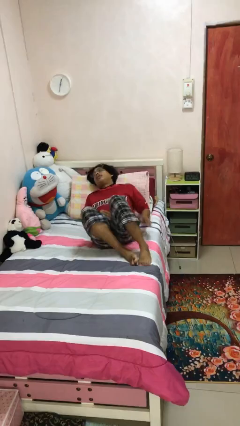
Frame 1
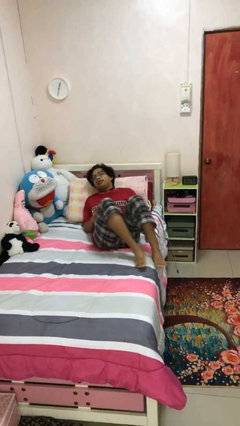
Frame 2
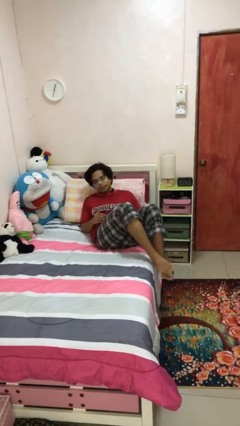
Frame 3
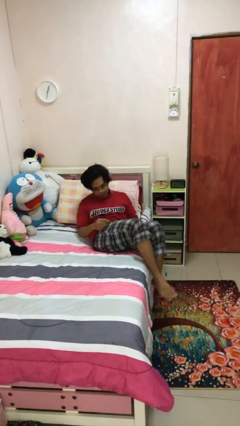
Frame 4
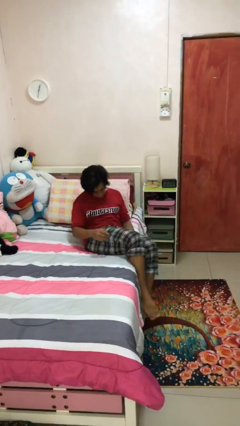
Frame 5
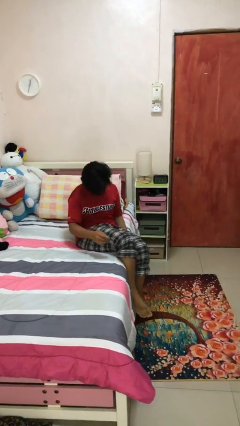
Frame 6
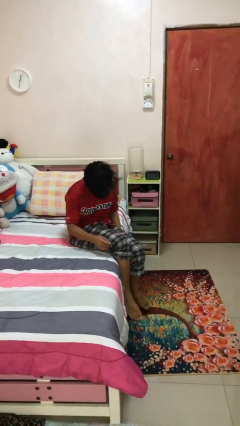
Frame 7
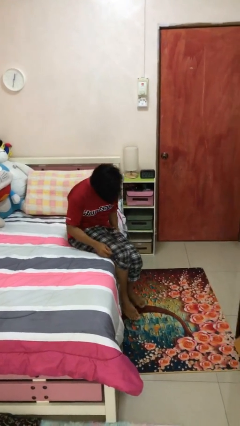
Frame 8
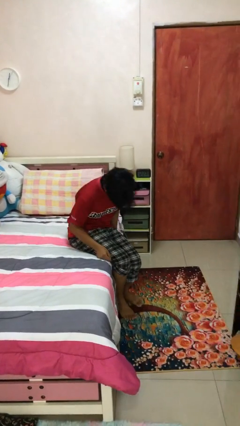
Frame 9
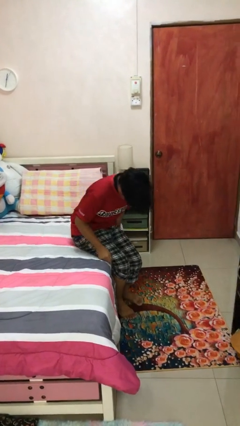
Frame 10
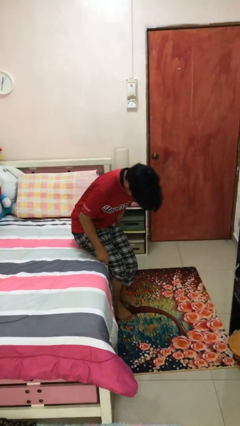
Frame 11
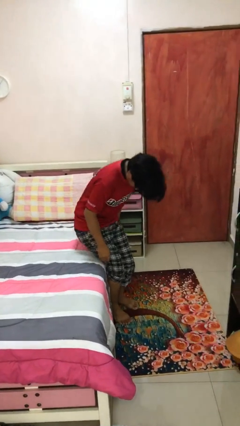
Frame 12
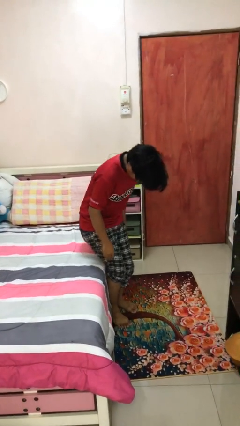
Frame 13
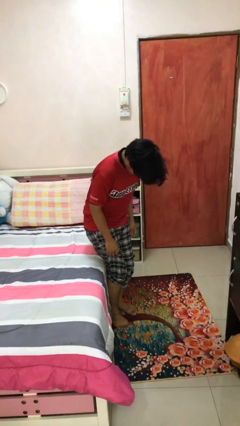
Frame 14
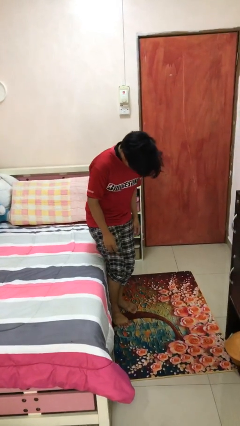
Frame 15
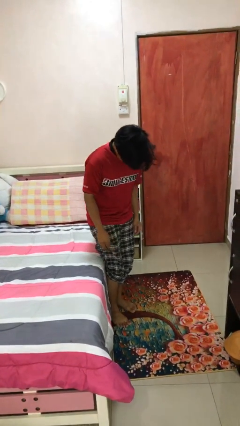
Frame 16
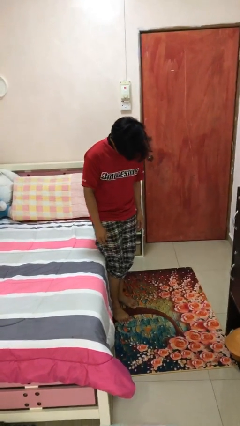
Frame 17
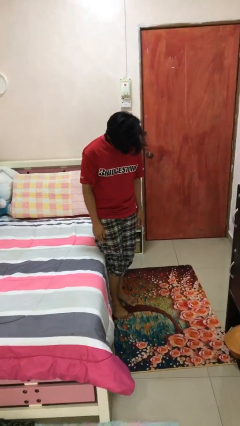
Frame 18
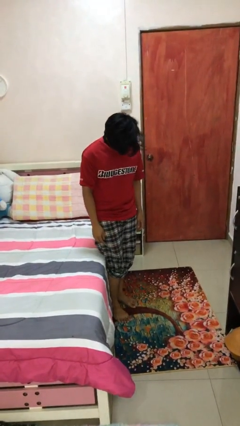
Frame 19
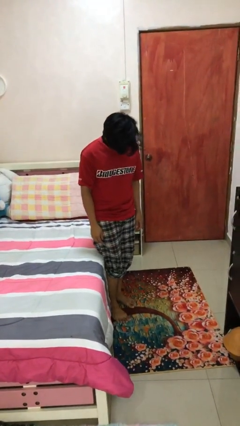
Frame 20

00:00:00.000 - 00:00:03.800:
person stands up

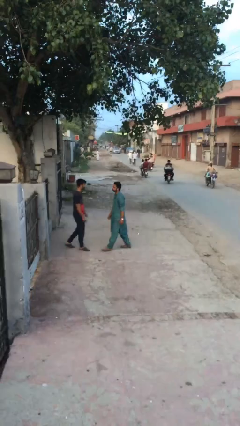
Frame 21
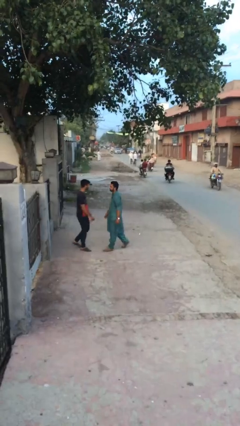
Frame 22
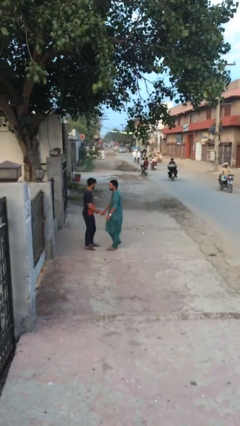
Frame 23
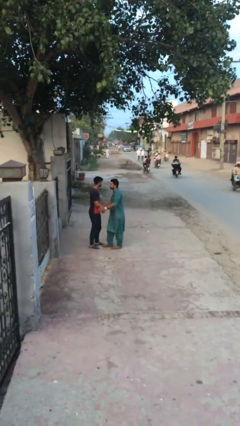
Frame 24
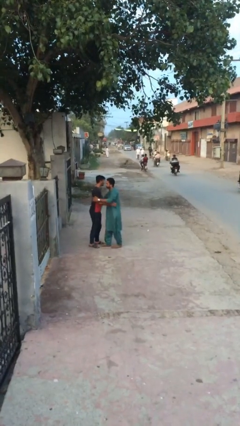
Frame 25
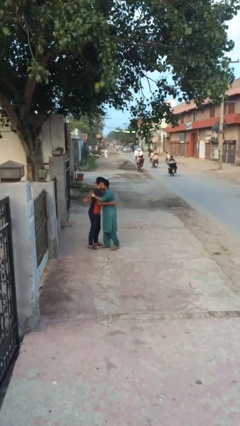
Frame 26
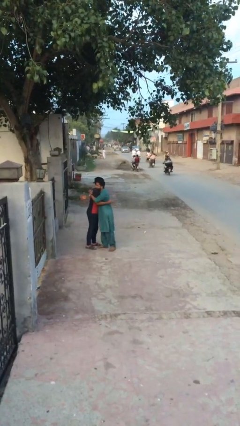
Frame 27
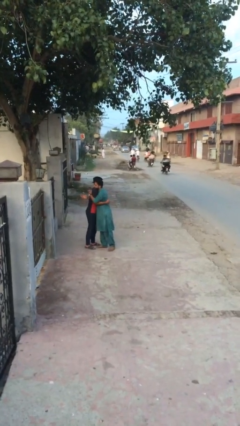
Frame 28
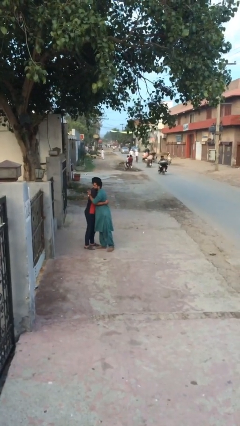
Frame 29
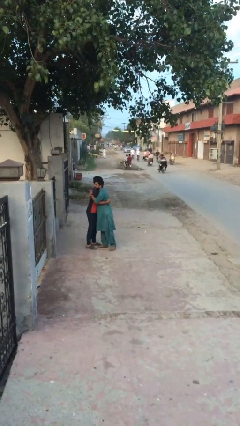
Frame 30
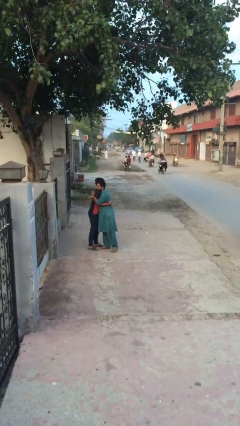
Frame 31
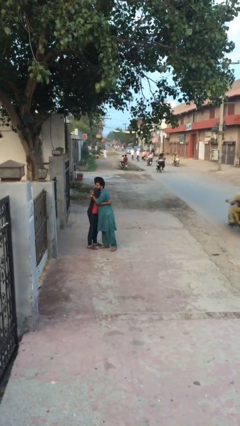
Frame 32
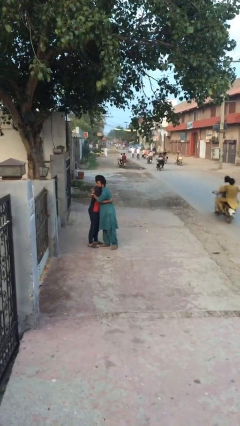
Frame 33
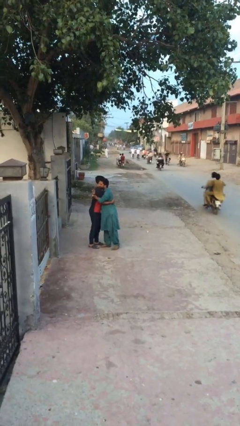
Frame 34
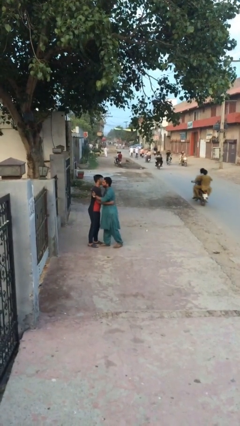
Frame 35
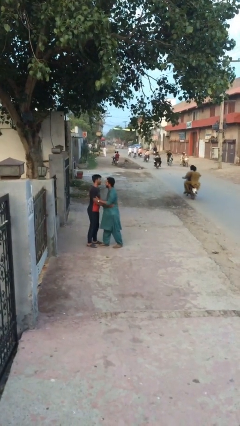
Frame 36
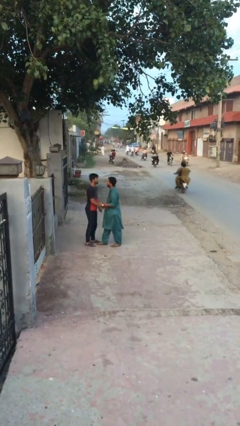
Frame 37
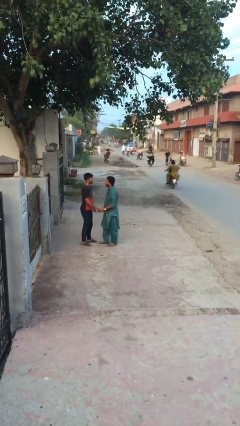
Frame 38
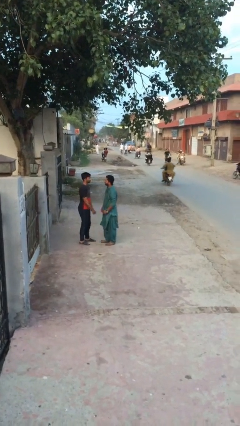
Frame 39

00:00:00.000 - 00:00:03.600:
person embraces person

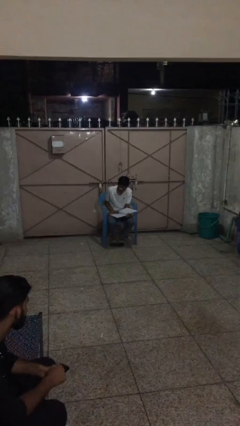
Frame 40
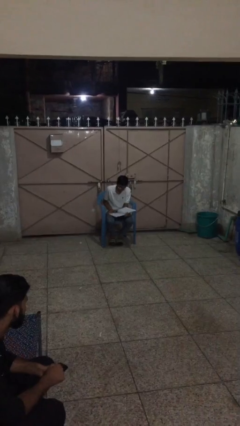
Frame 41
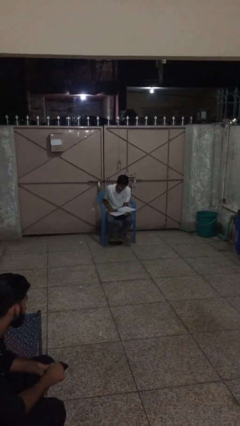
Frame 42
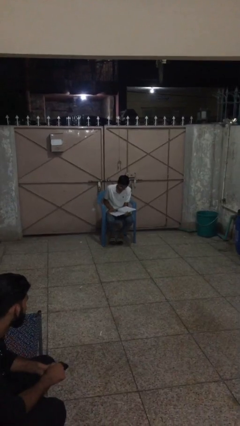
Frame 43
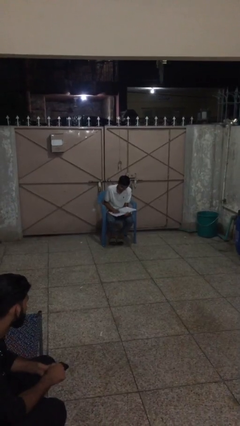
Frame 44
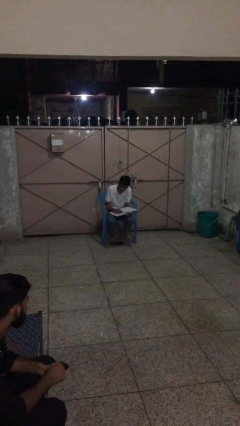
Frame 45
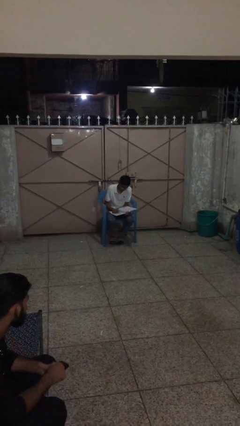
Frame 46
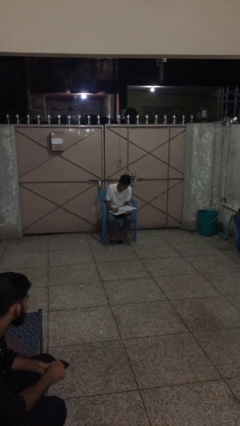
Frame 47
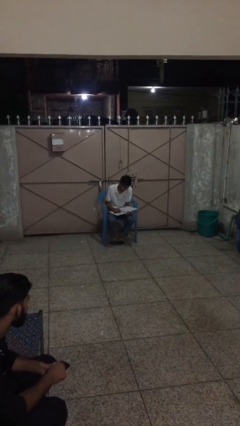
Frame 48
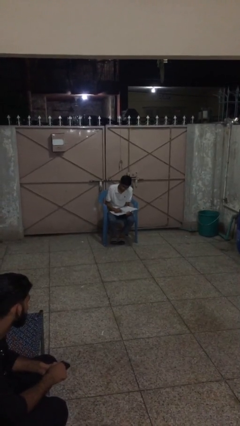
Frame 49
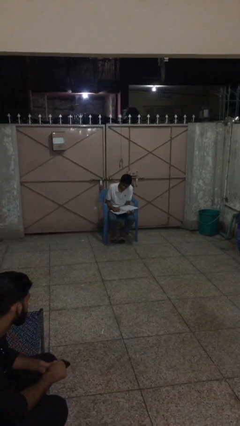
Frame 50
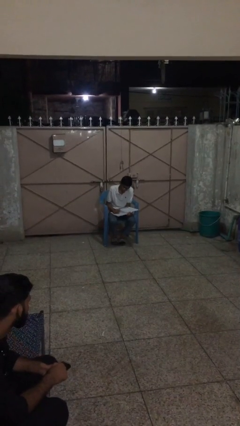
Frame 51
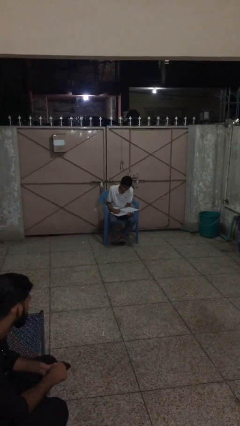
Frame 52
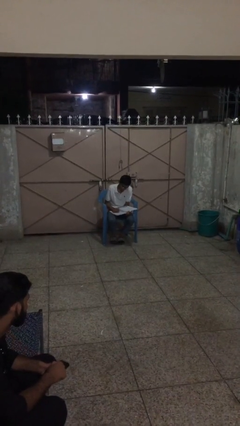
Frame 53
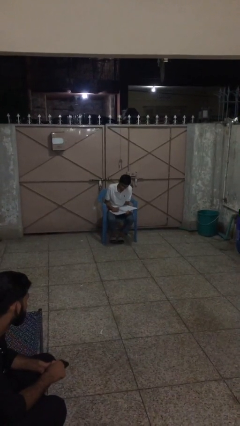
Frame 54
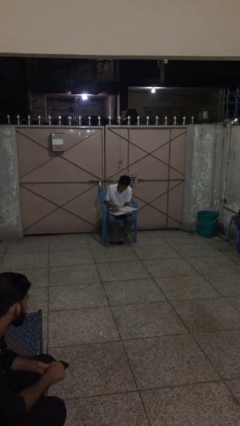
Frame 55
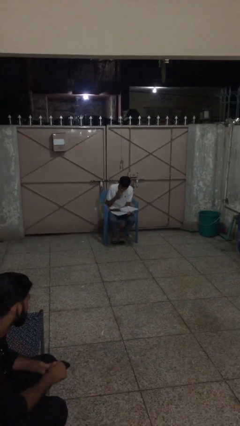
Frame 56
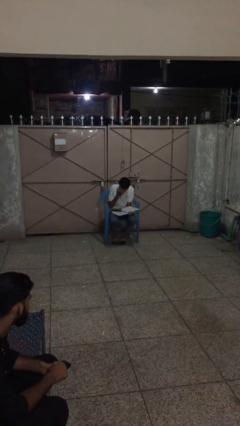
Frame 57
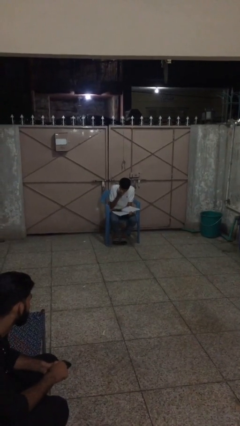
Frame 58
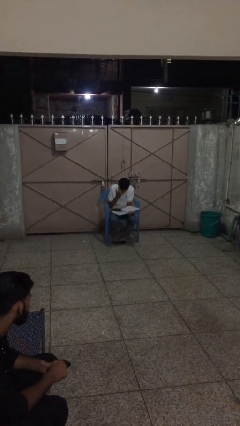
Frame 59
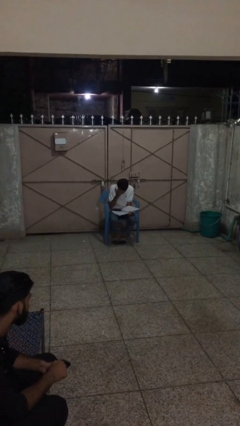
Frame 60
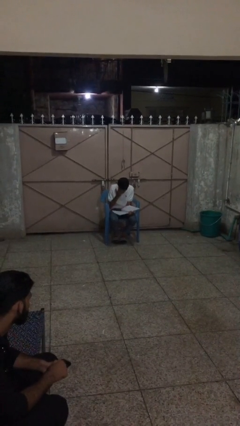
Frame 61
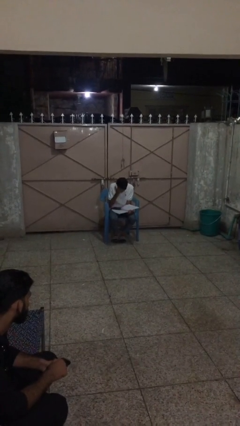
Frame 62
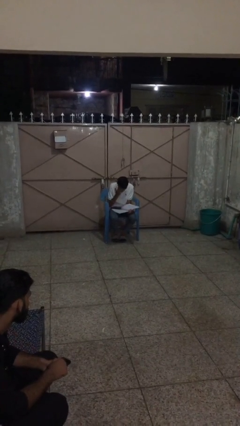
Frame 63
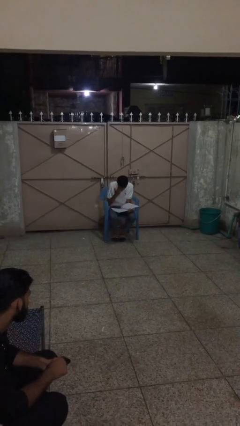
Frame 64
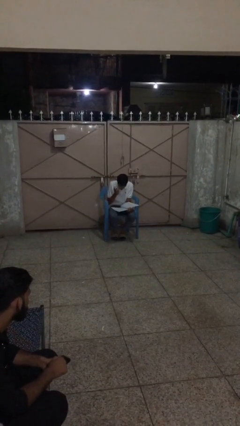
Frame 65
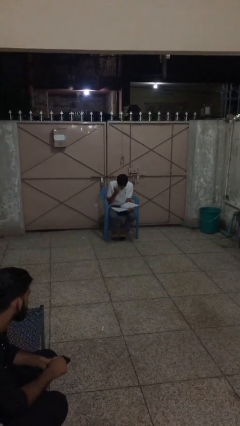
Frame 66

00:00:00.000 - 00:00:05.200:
person reads document

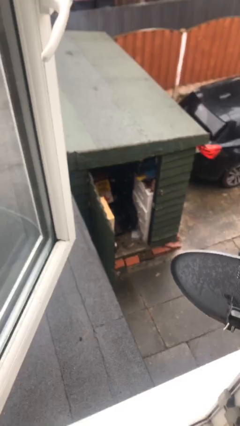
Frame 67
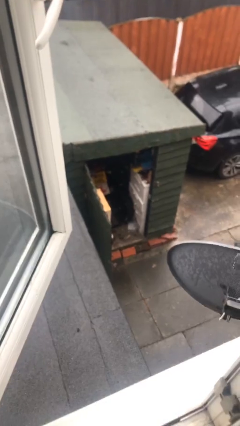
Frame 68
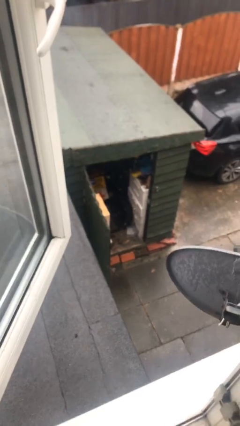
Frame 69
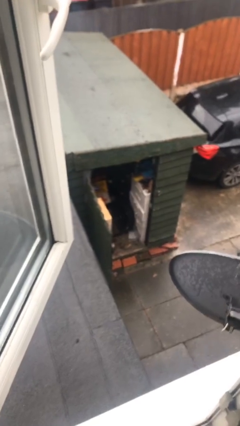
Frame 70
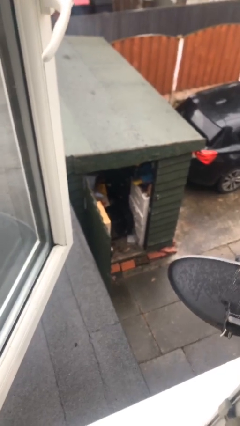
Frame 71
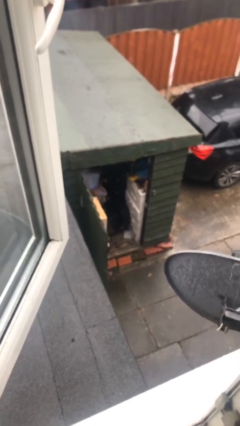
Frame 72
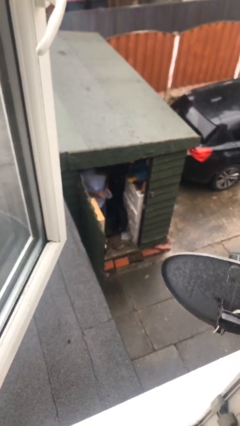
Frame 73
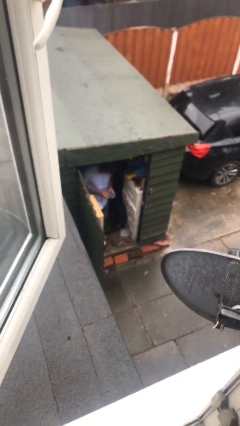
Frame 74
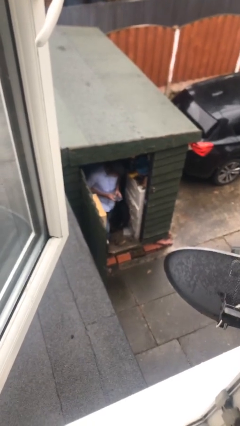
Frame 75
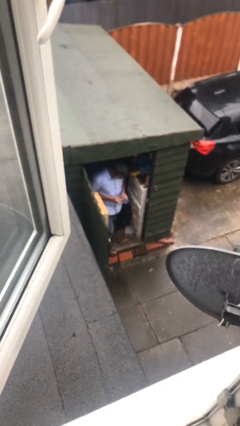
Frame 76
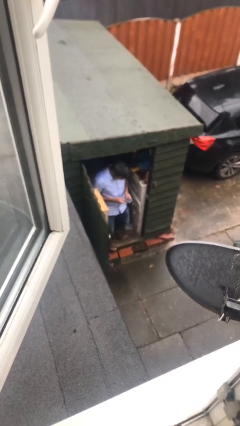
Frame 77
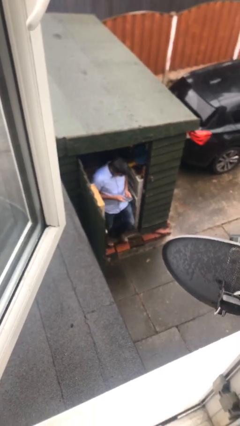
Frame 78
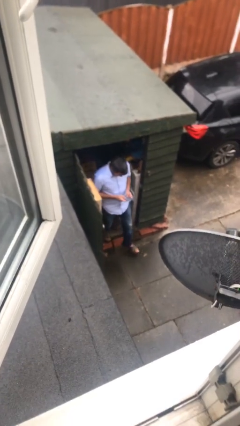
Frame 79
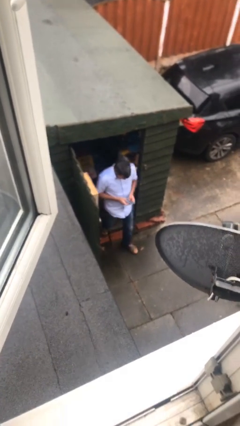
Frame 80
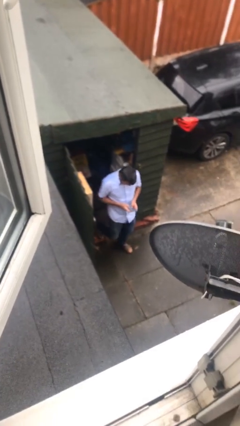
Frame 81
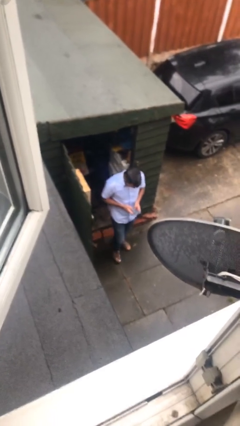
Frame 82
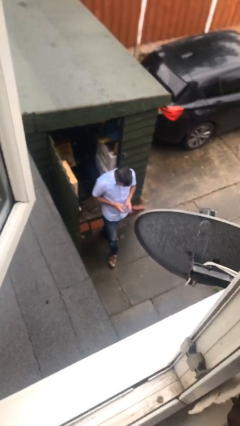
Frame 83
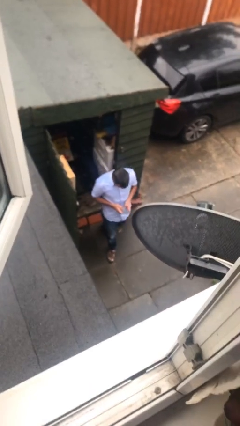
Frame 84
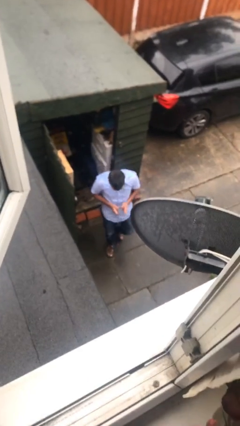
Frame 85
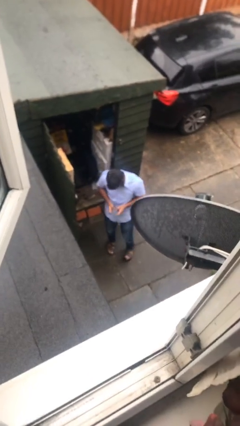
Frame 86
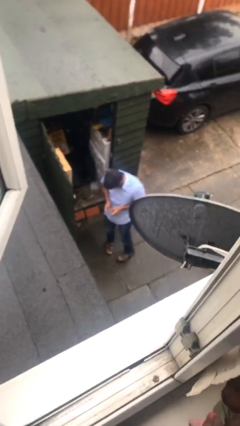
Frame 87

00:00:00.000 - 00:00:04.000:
person enters scene through structure

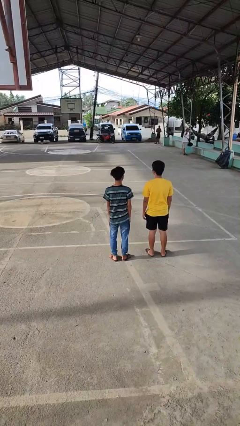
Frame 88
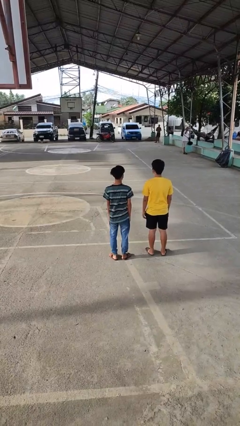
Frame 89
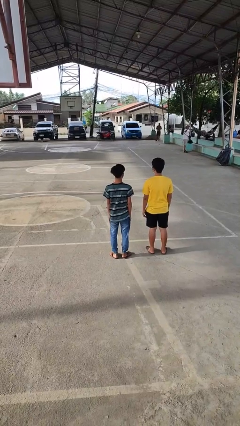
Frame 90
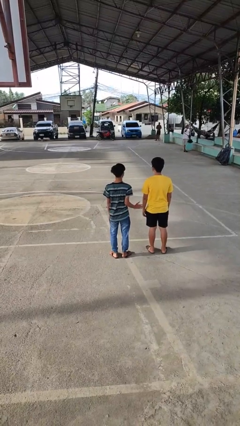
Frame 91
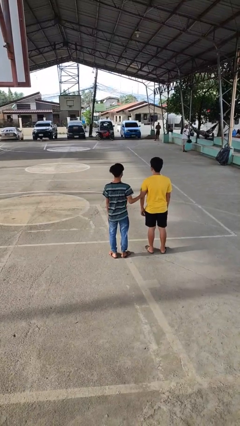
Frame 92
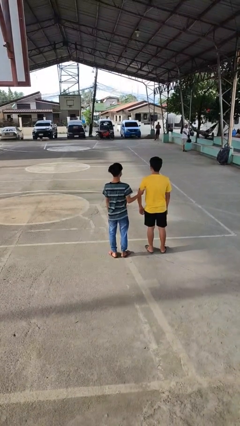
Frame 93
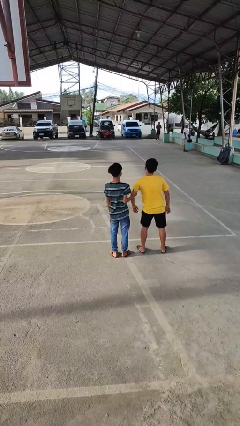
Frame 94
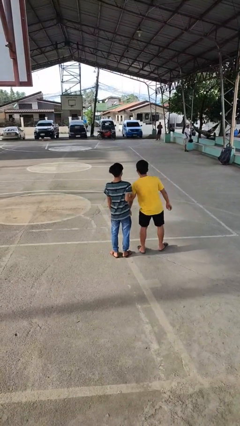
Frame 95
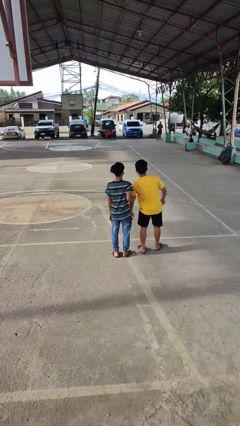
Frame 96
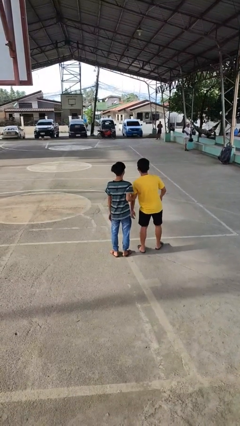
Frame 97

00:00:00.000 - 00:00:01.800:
person grabs person by bicep
